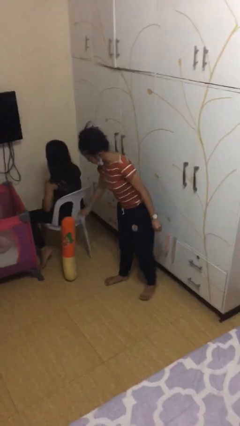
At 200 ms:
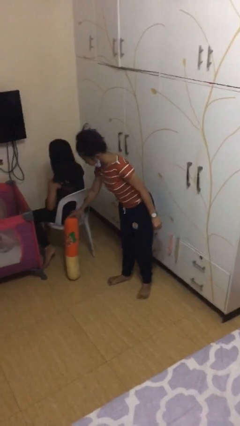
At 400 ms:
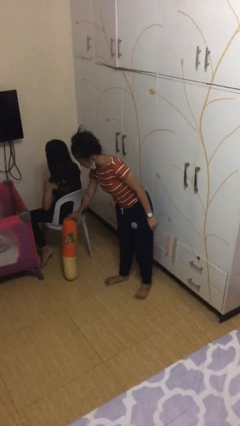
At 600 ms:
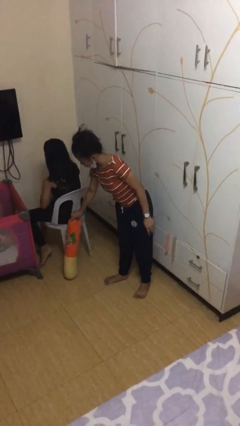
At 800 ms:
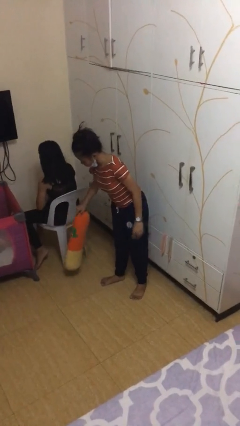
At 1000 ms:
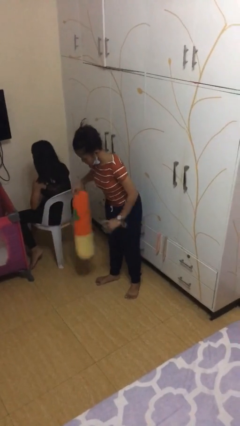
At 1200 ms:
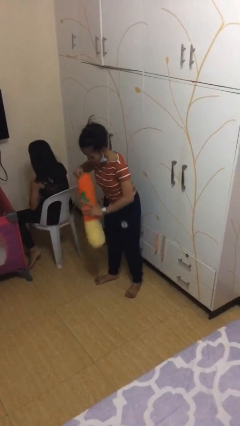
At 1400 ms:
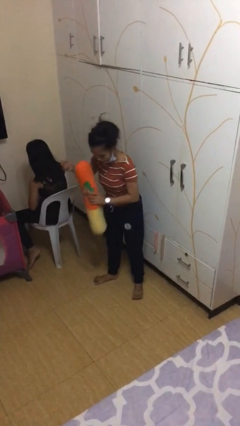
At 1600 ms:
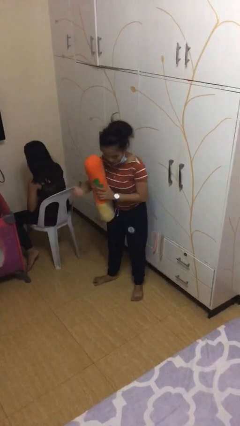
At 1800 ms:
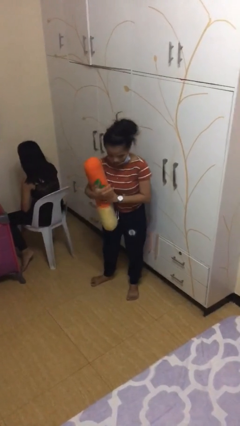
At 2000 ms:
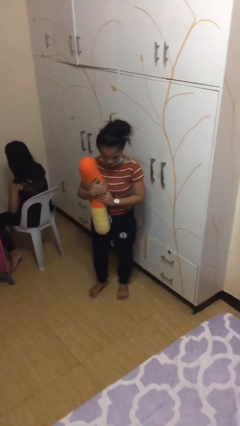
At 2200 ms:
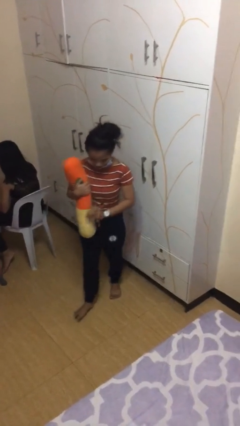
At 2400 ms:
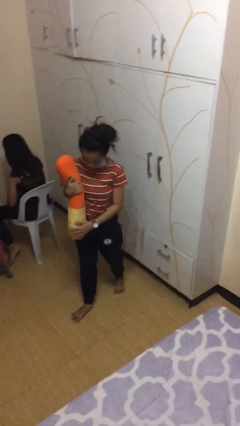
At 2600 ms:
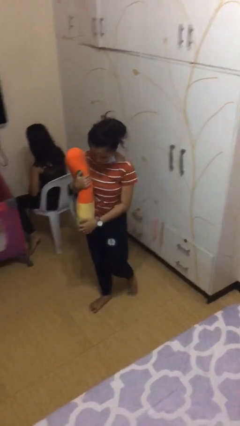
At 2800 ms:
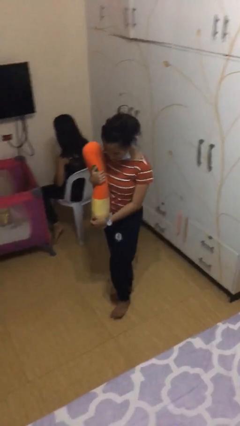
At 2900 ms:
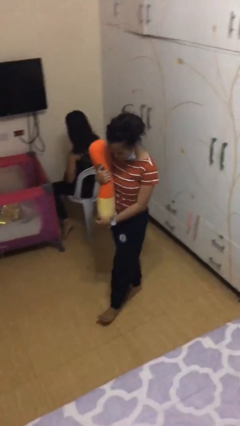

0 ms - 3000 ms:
person steals object from person

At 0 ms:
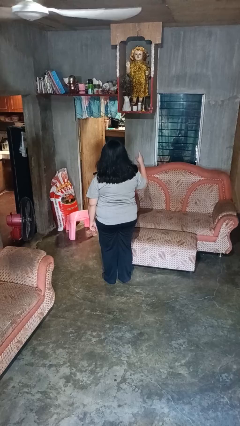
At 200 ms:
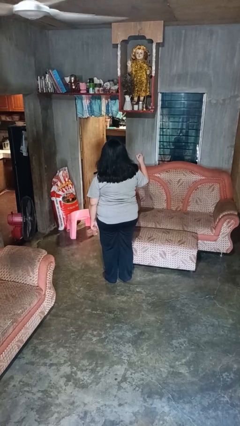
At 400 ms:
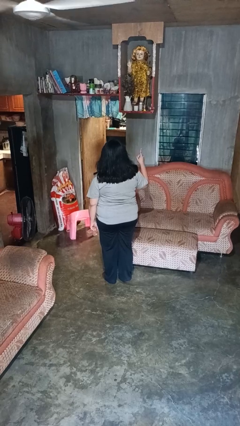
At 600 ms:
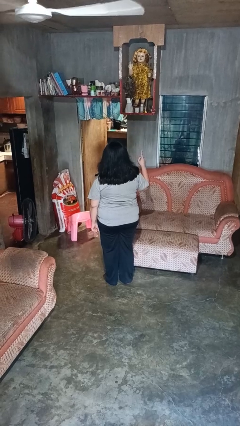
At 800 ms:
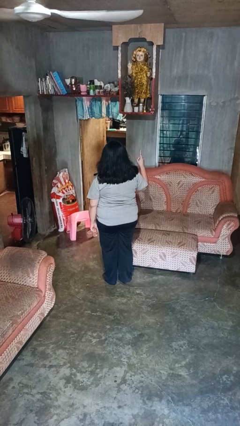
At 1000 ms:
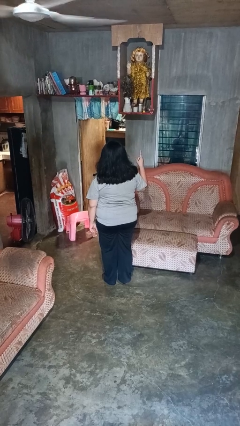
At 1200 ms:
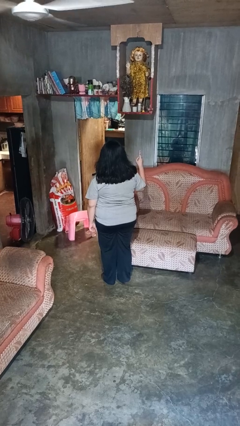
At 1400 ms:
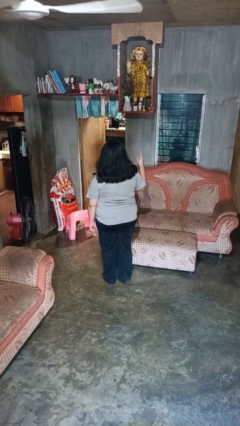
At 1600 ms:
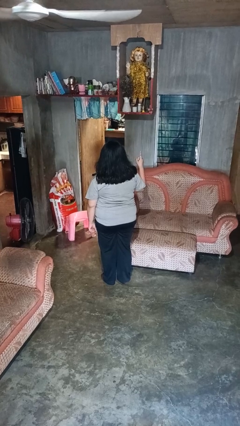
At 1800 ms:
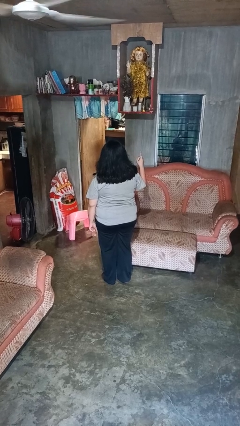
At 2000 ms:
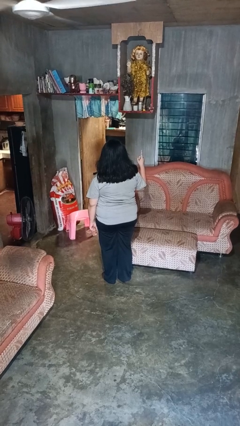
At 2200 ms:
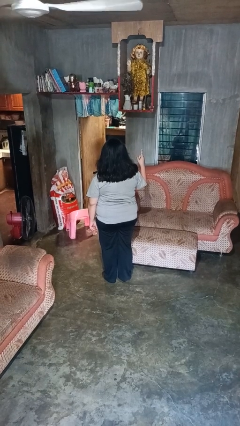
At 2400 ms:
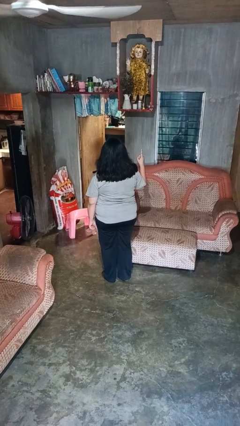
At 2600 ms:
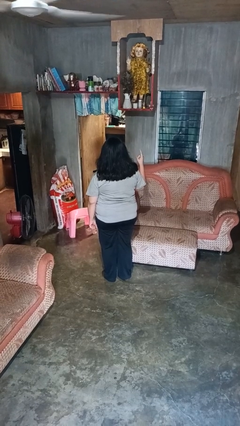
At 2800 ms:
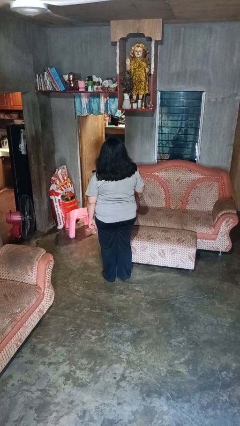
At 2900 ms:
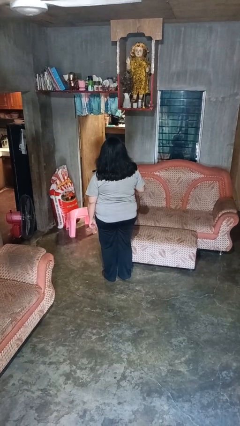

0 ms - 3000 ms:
person gestures number one

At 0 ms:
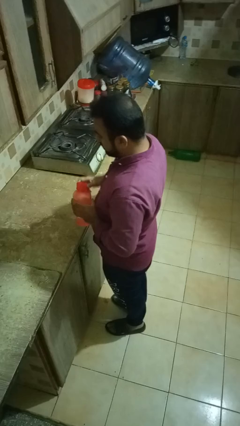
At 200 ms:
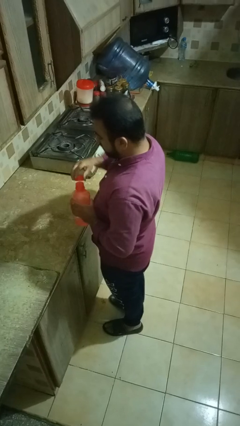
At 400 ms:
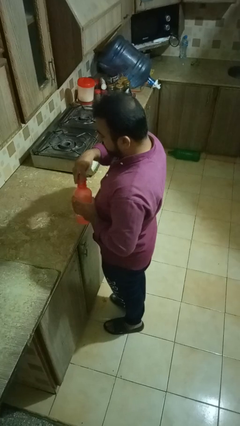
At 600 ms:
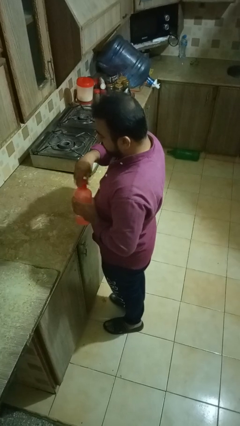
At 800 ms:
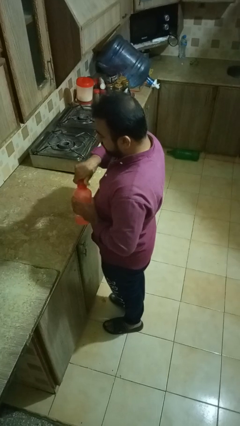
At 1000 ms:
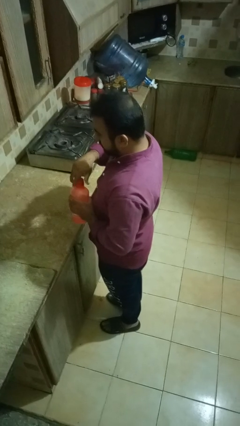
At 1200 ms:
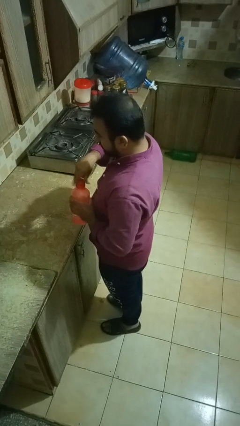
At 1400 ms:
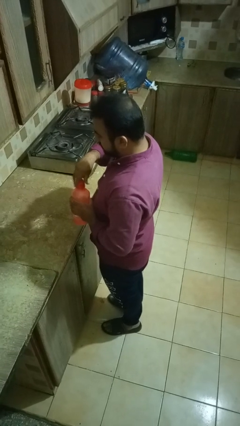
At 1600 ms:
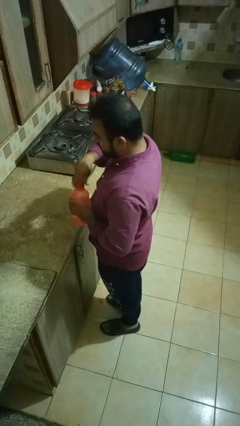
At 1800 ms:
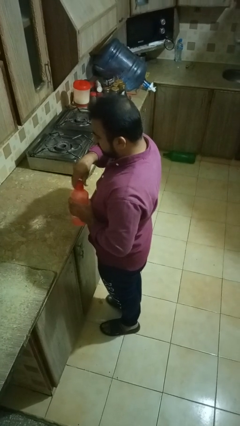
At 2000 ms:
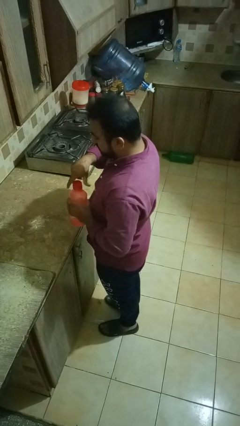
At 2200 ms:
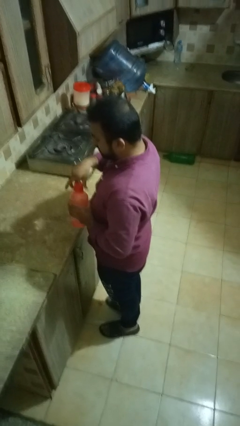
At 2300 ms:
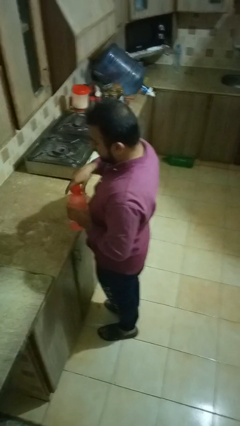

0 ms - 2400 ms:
person screws lid to bottle

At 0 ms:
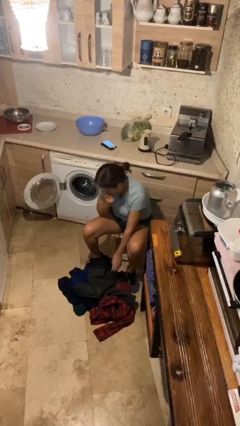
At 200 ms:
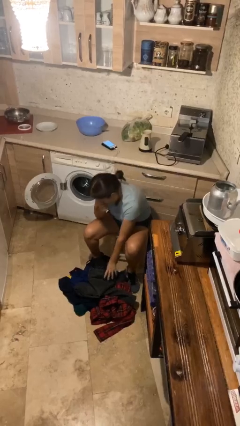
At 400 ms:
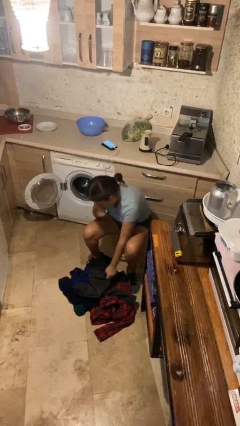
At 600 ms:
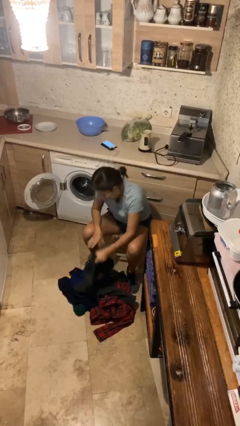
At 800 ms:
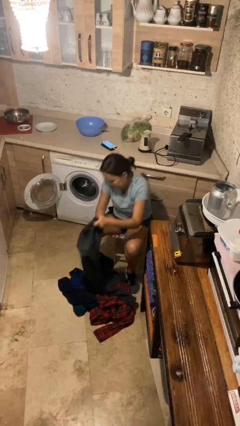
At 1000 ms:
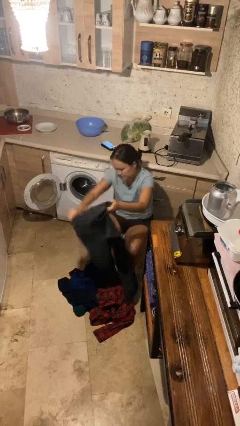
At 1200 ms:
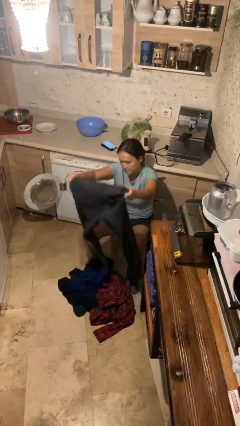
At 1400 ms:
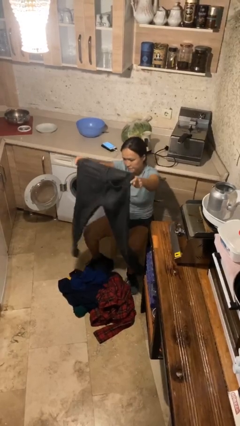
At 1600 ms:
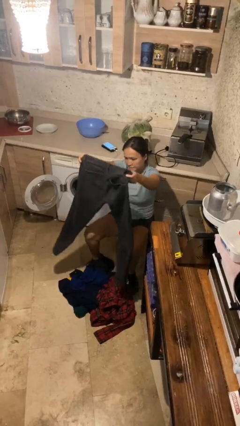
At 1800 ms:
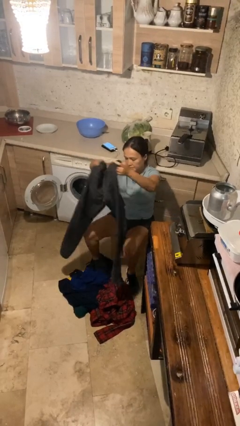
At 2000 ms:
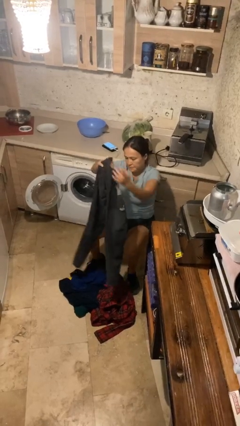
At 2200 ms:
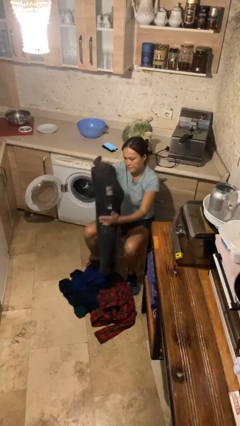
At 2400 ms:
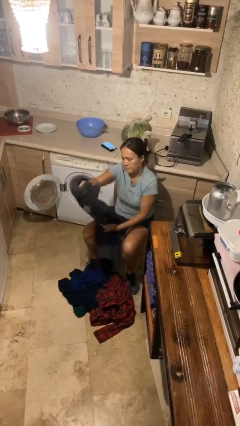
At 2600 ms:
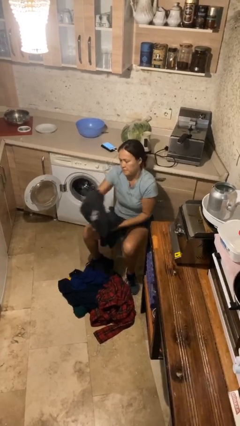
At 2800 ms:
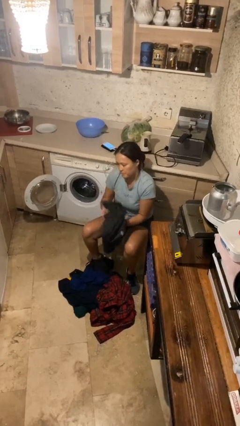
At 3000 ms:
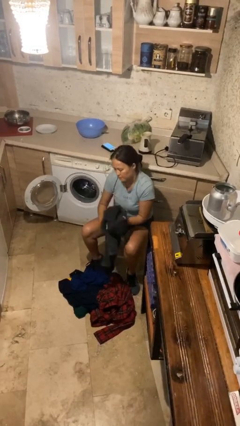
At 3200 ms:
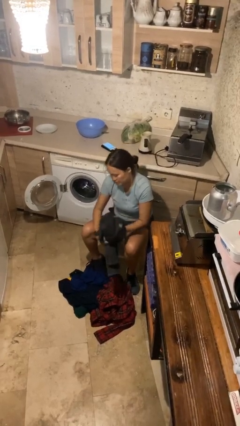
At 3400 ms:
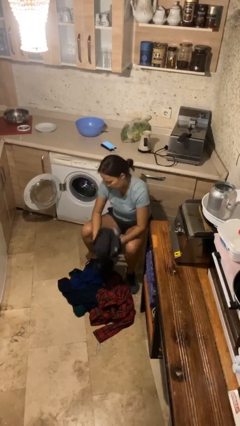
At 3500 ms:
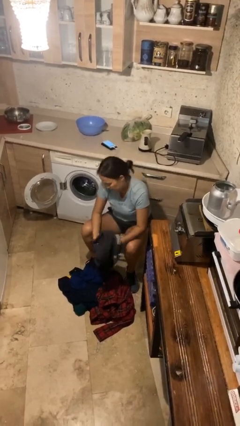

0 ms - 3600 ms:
person folds pants

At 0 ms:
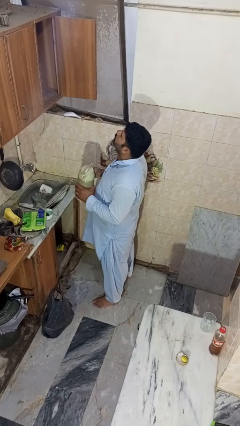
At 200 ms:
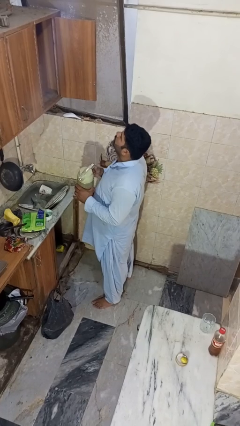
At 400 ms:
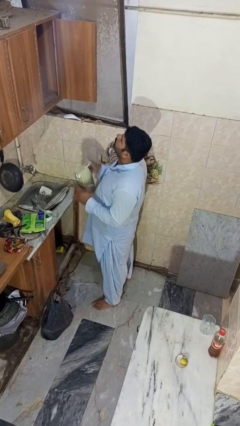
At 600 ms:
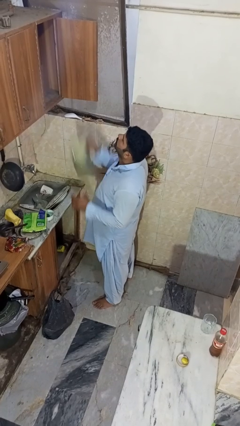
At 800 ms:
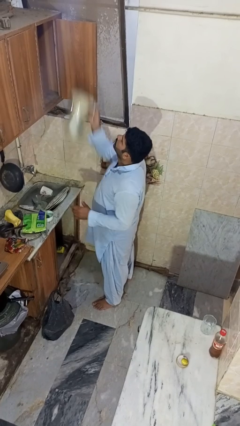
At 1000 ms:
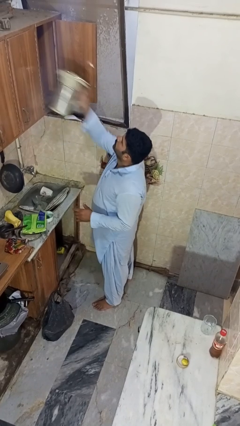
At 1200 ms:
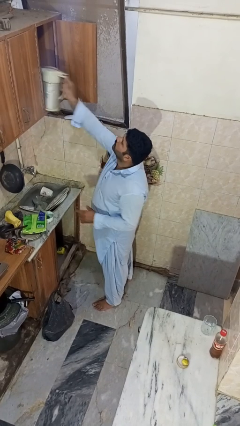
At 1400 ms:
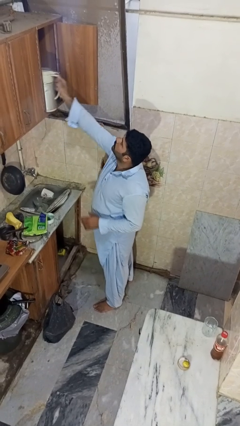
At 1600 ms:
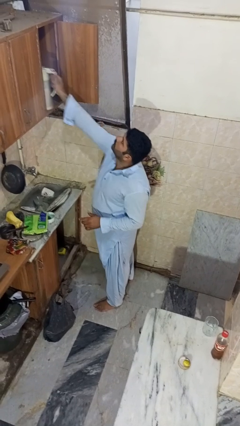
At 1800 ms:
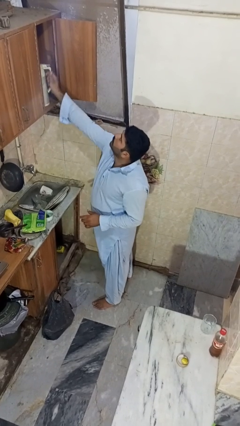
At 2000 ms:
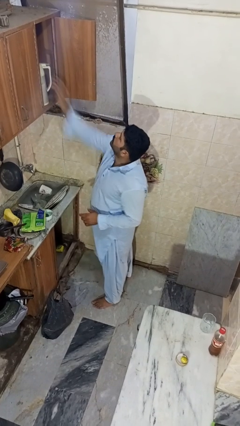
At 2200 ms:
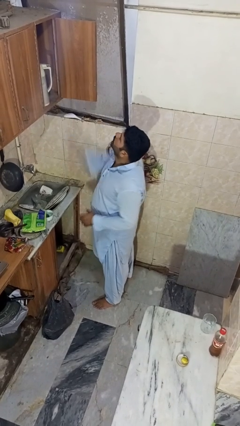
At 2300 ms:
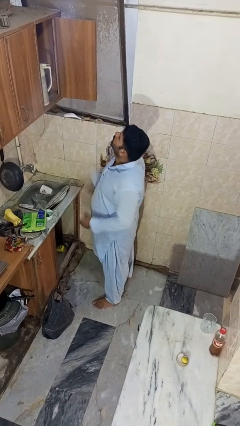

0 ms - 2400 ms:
person puts object in cabinet

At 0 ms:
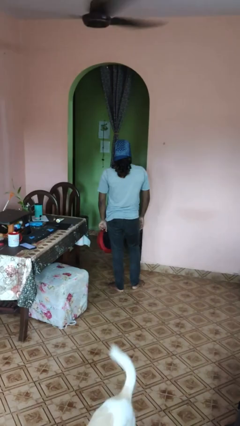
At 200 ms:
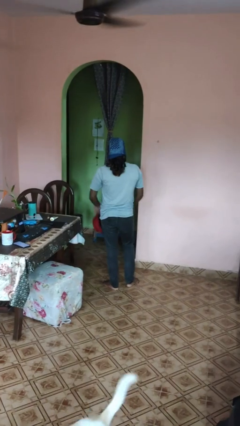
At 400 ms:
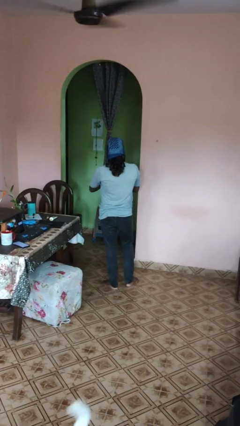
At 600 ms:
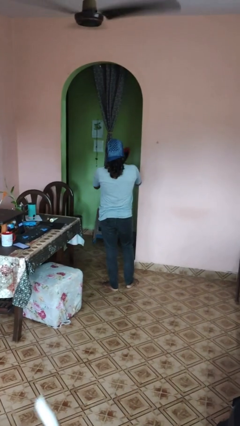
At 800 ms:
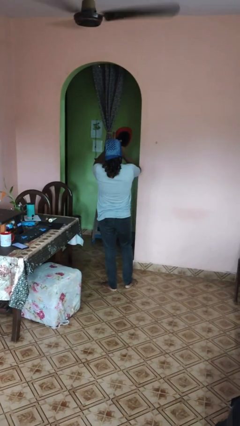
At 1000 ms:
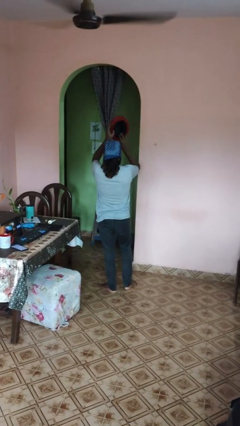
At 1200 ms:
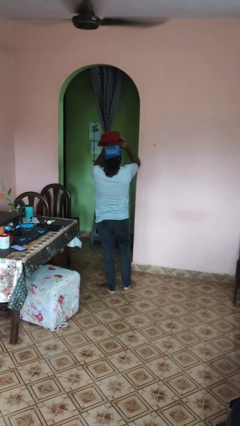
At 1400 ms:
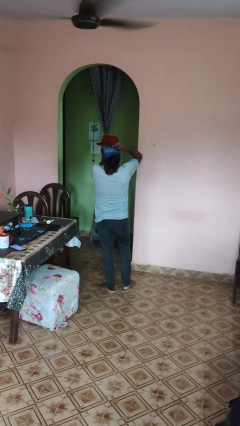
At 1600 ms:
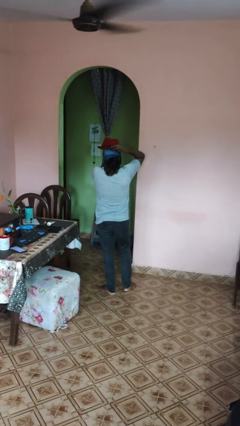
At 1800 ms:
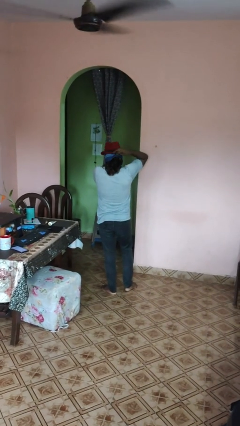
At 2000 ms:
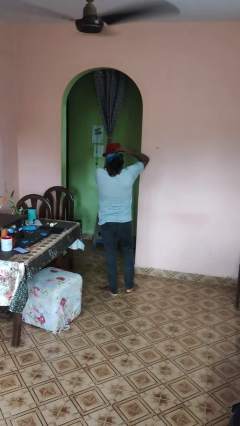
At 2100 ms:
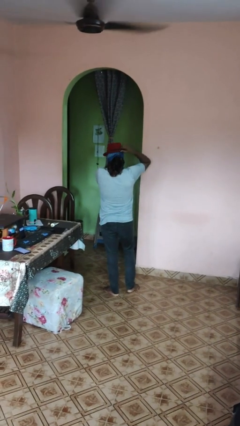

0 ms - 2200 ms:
person puts on hat

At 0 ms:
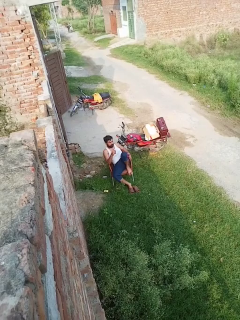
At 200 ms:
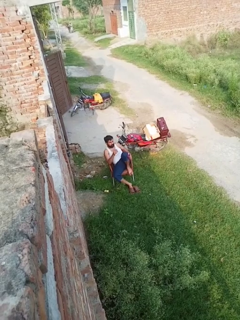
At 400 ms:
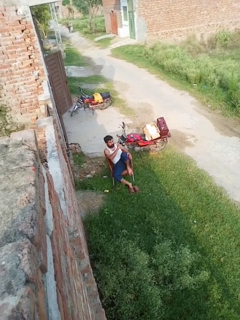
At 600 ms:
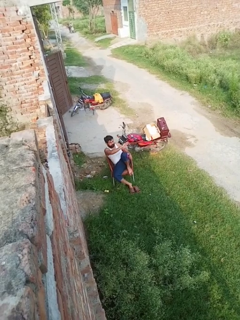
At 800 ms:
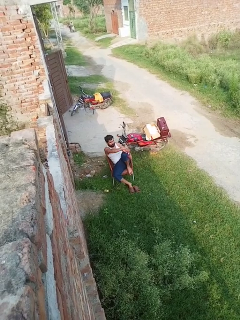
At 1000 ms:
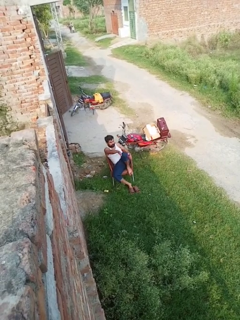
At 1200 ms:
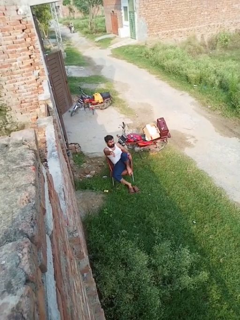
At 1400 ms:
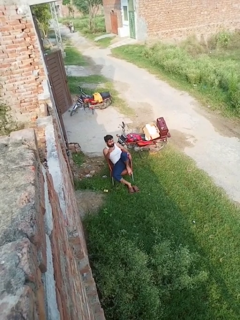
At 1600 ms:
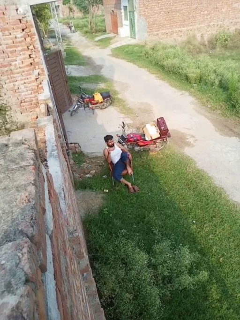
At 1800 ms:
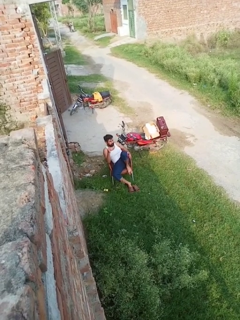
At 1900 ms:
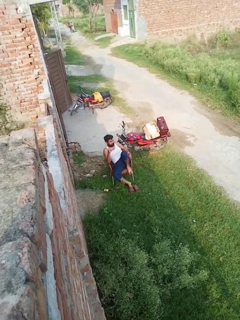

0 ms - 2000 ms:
person gestures swipe right
